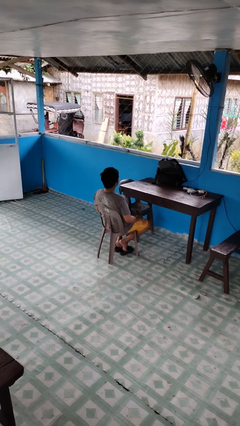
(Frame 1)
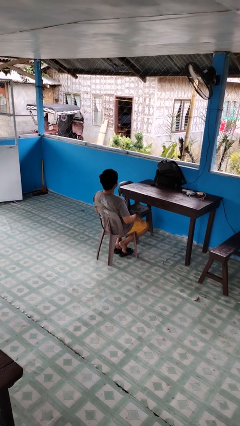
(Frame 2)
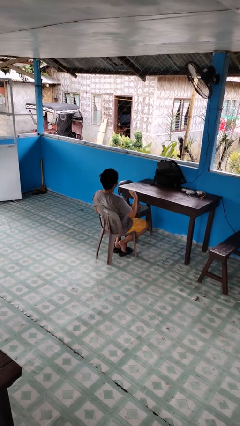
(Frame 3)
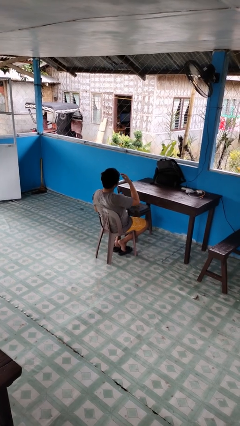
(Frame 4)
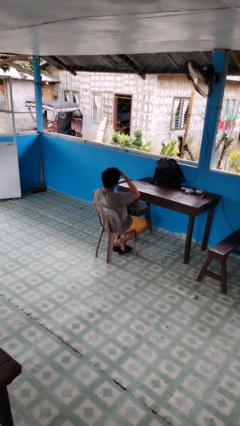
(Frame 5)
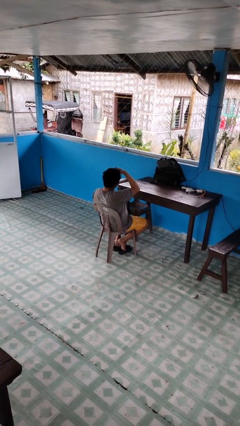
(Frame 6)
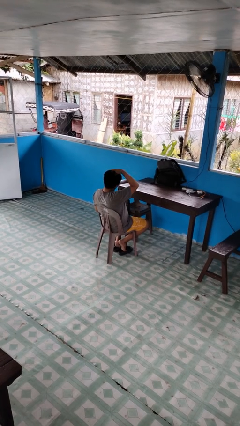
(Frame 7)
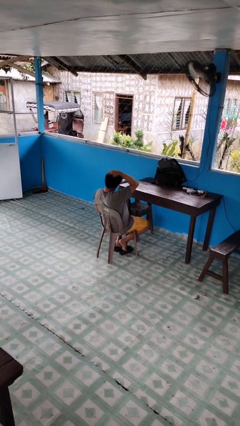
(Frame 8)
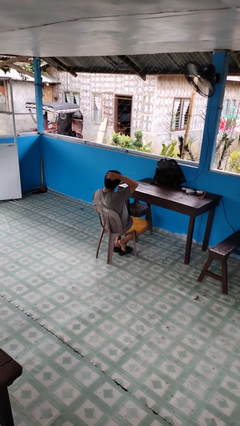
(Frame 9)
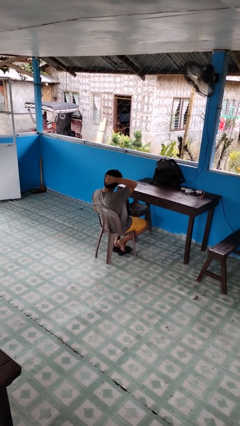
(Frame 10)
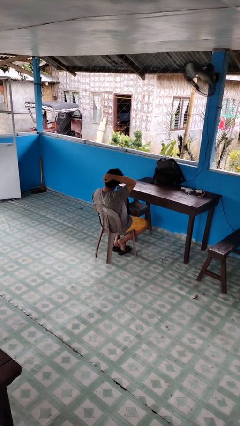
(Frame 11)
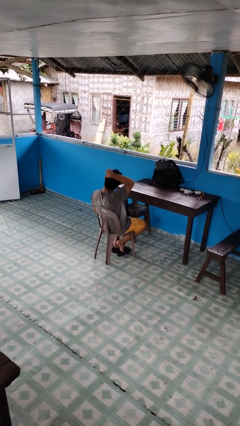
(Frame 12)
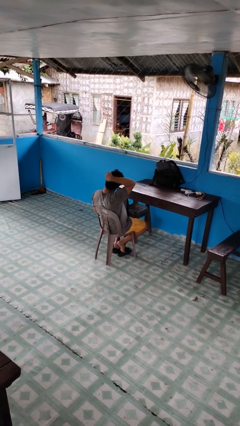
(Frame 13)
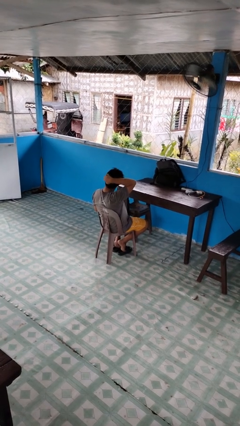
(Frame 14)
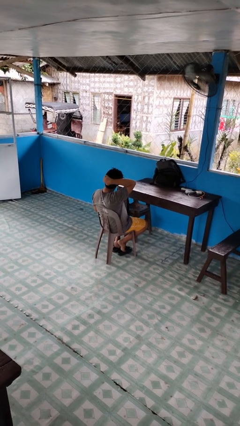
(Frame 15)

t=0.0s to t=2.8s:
person strokes hair

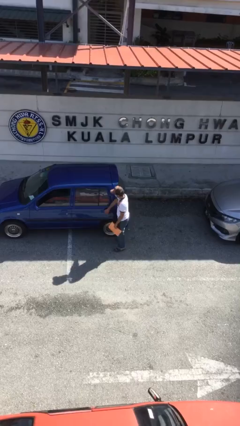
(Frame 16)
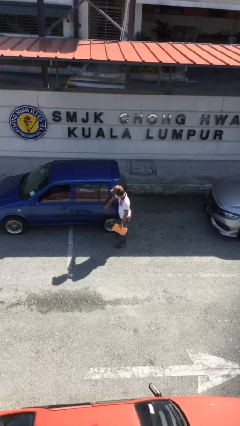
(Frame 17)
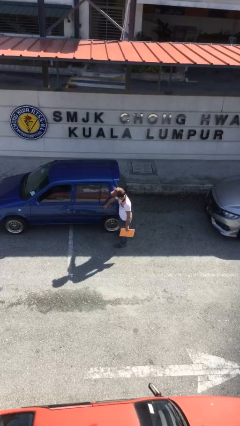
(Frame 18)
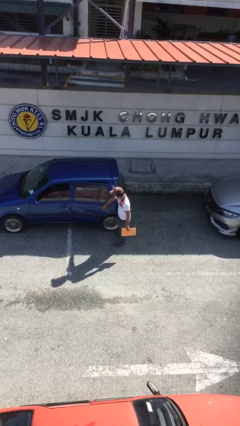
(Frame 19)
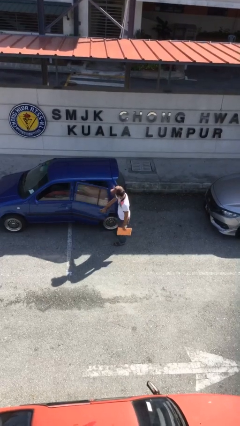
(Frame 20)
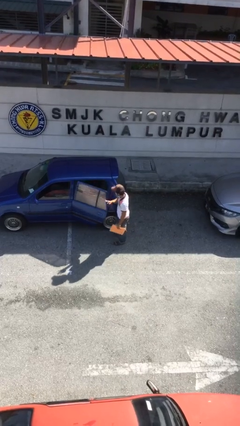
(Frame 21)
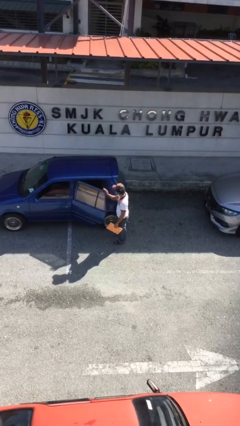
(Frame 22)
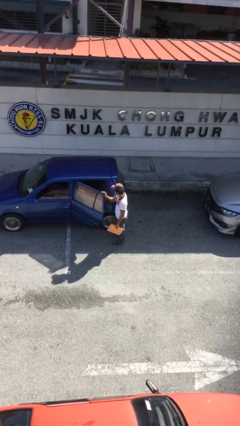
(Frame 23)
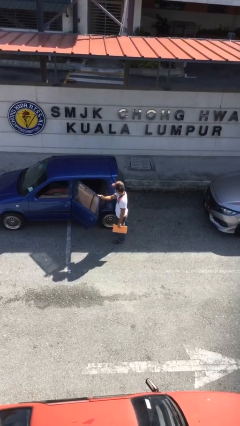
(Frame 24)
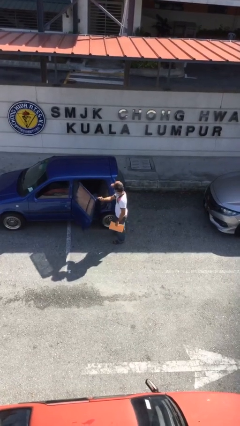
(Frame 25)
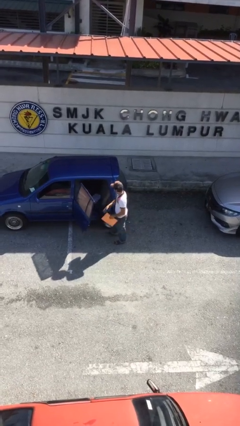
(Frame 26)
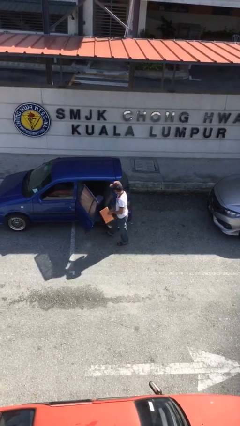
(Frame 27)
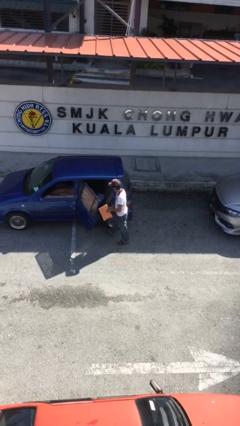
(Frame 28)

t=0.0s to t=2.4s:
person opens car door

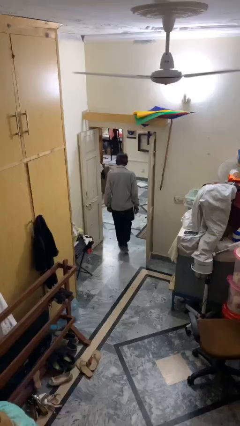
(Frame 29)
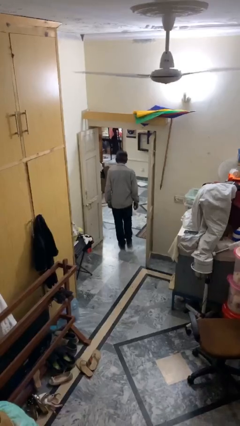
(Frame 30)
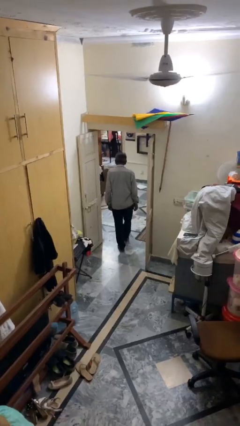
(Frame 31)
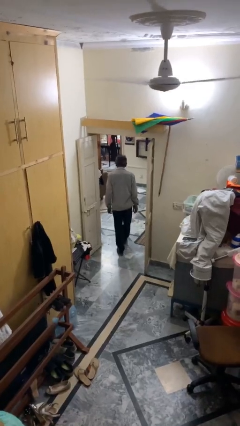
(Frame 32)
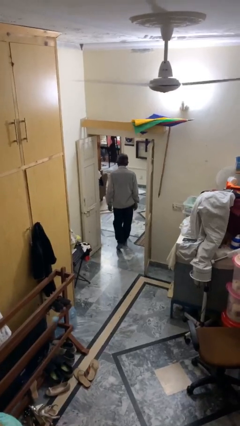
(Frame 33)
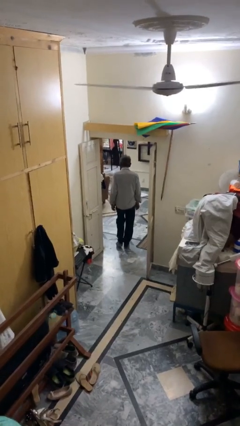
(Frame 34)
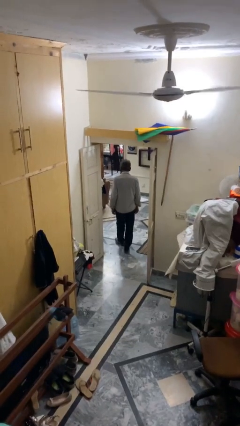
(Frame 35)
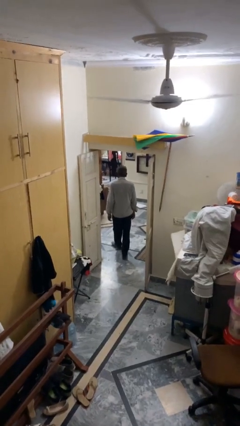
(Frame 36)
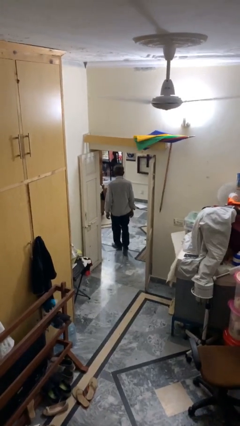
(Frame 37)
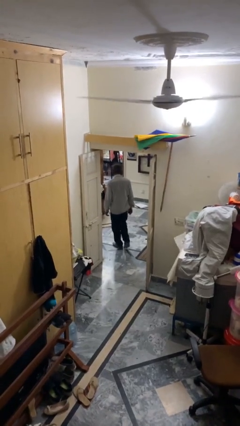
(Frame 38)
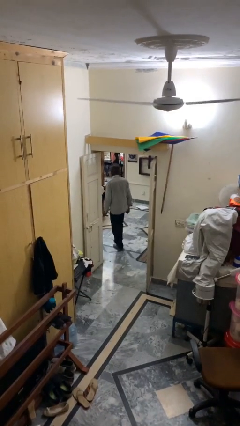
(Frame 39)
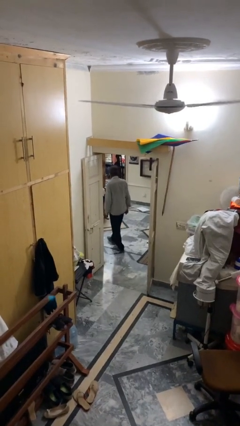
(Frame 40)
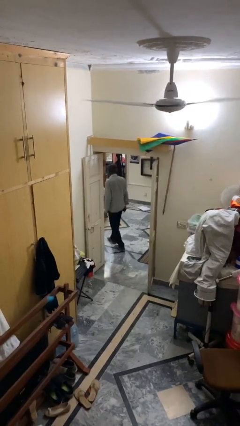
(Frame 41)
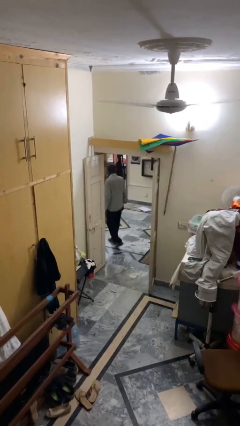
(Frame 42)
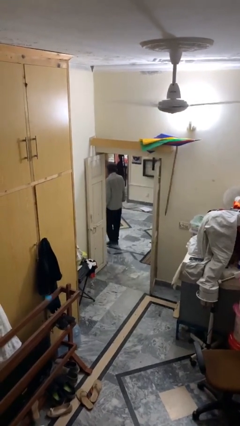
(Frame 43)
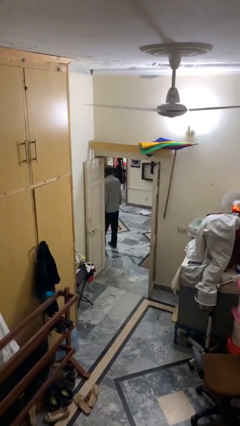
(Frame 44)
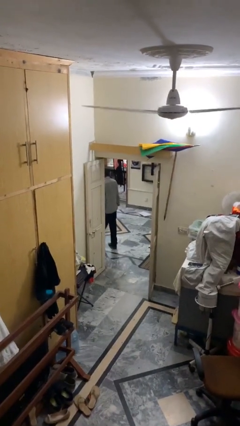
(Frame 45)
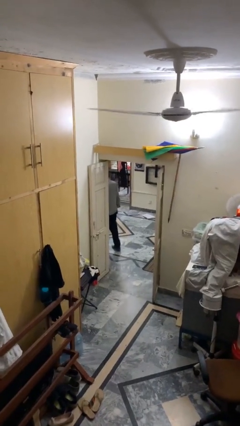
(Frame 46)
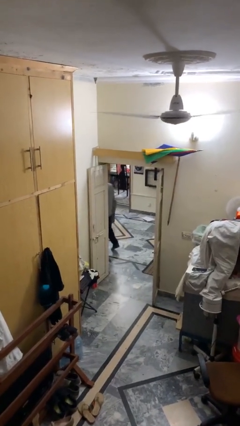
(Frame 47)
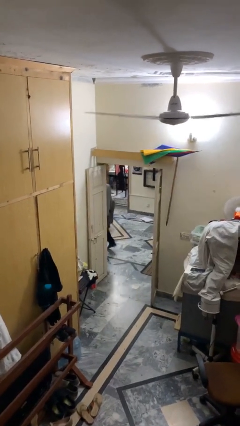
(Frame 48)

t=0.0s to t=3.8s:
person exits scene through structure

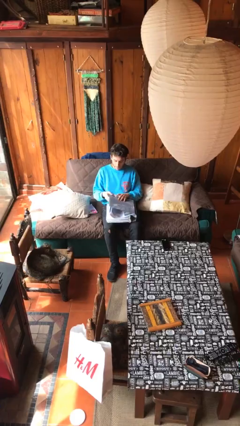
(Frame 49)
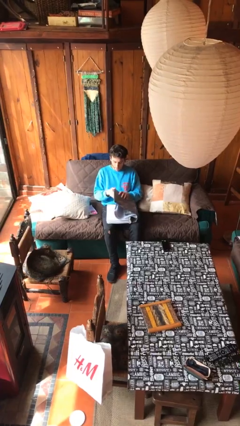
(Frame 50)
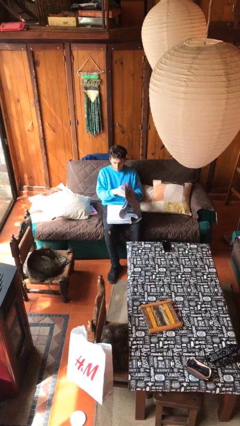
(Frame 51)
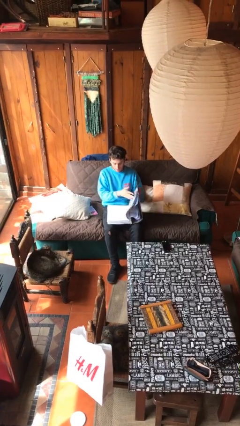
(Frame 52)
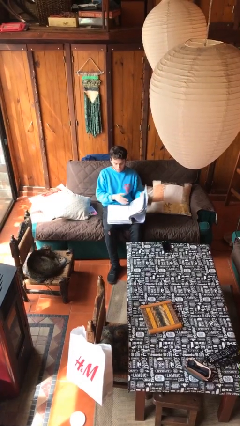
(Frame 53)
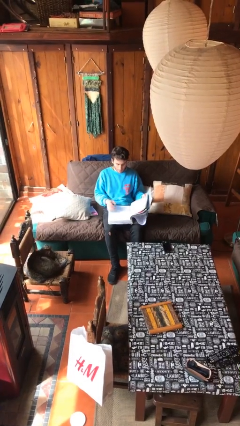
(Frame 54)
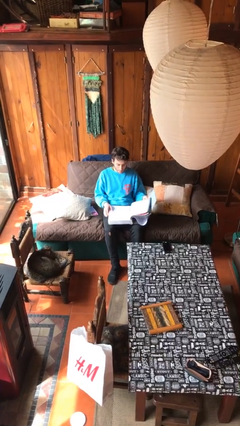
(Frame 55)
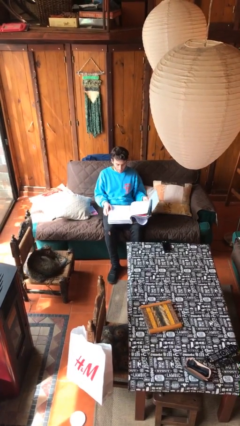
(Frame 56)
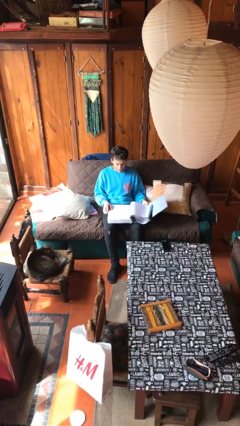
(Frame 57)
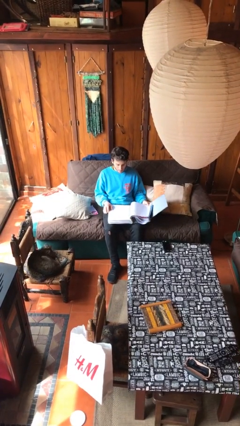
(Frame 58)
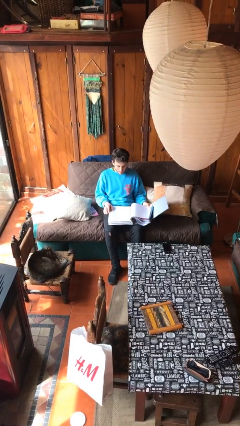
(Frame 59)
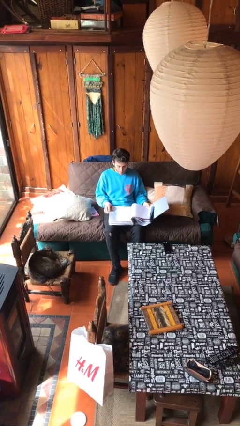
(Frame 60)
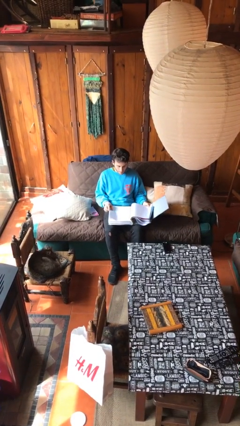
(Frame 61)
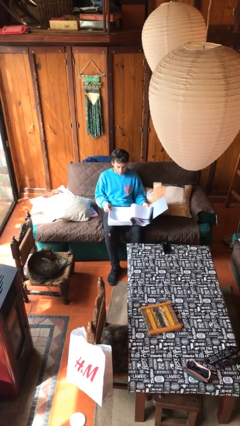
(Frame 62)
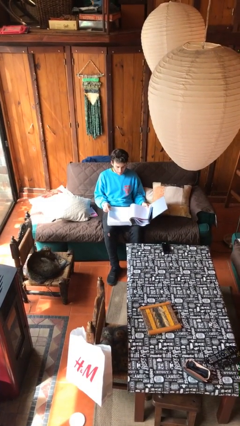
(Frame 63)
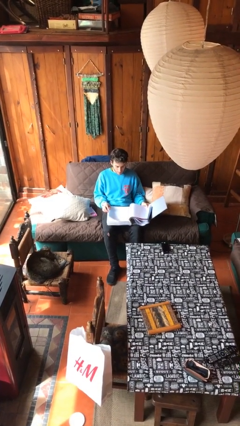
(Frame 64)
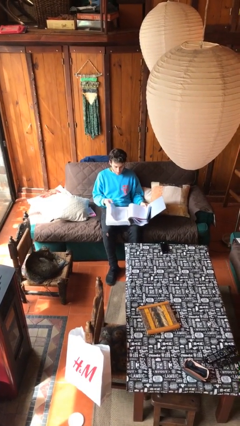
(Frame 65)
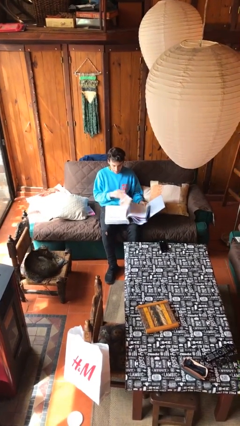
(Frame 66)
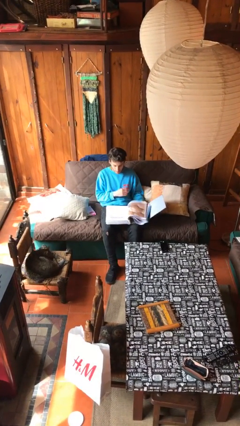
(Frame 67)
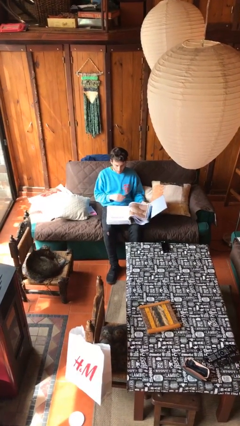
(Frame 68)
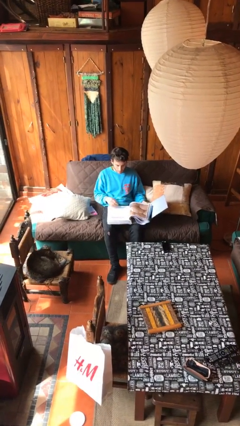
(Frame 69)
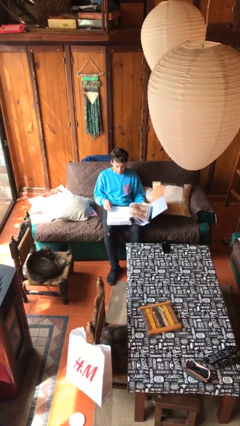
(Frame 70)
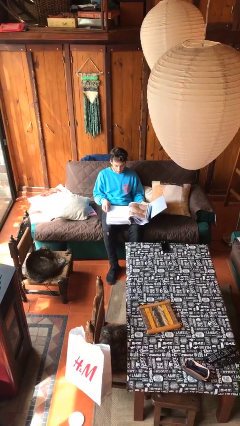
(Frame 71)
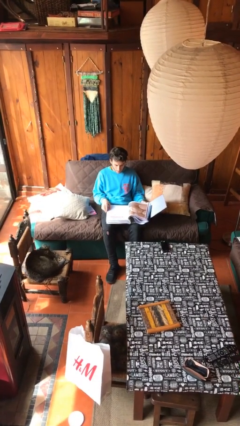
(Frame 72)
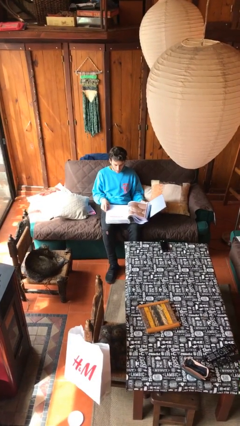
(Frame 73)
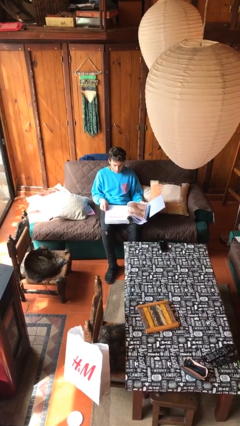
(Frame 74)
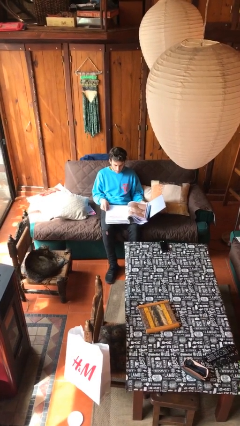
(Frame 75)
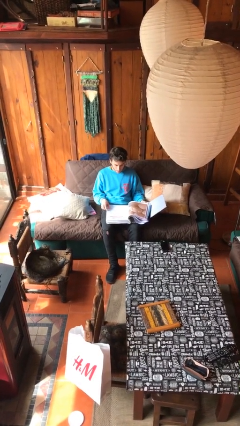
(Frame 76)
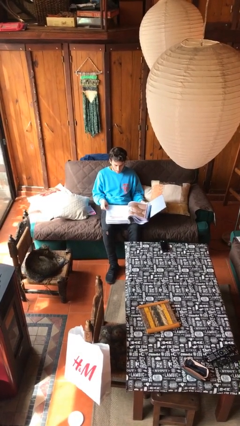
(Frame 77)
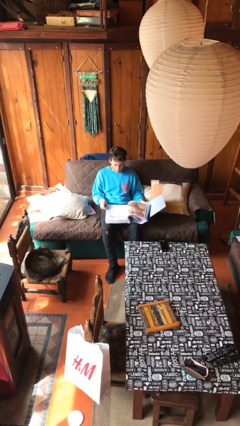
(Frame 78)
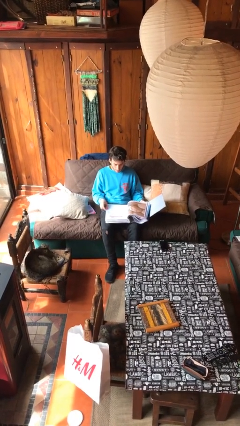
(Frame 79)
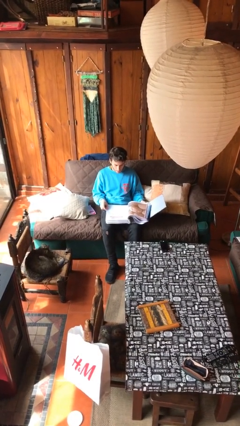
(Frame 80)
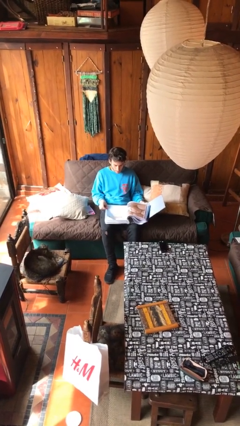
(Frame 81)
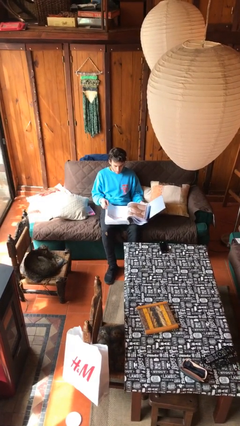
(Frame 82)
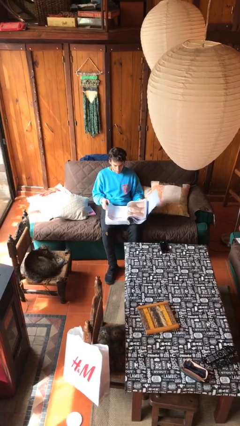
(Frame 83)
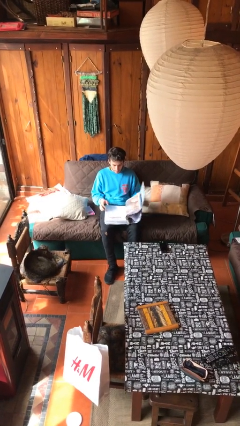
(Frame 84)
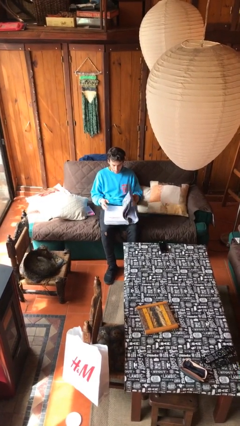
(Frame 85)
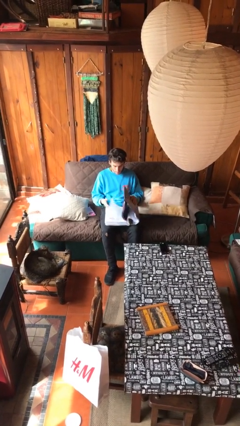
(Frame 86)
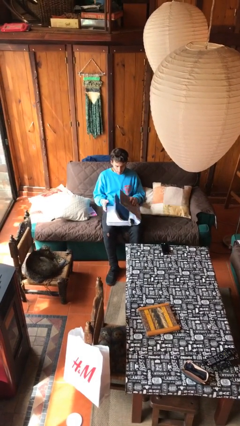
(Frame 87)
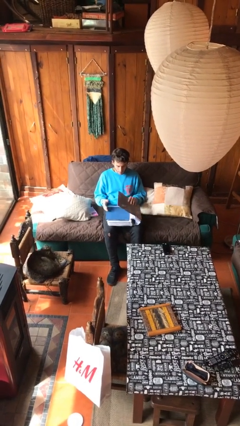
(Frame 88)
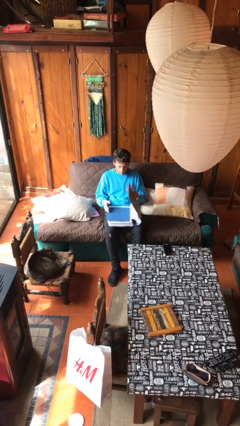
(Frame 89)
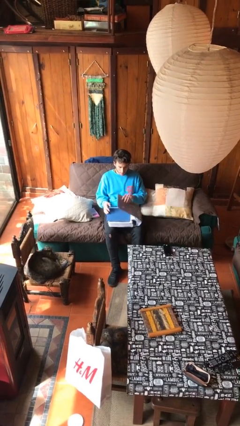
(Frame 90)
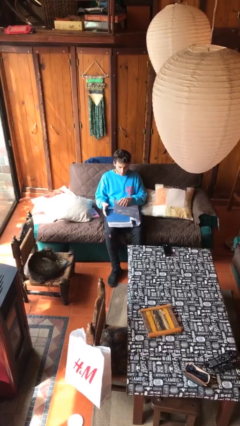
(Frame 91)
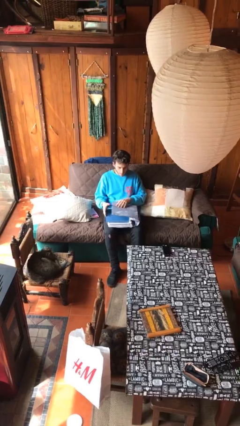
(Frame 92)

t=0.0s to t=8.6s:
person reads document
